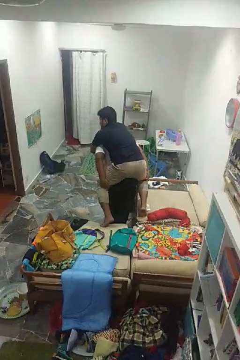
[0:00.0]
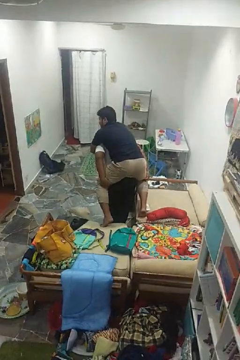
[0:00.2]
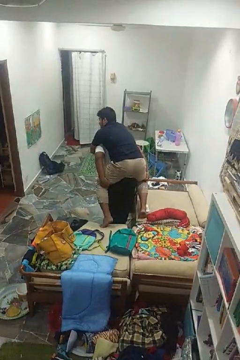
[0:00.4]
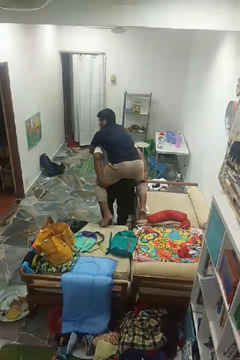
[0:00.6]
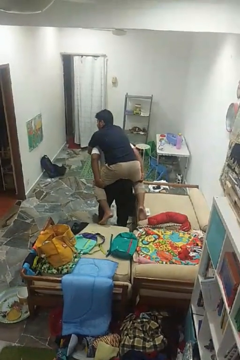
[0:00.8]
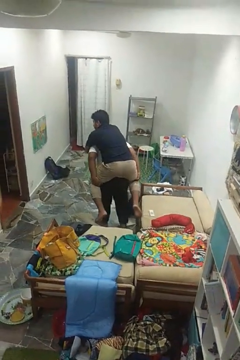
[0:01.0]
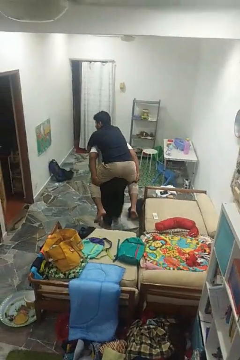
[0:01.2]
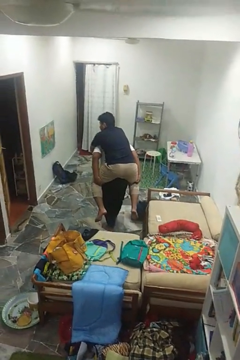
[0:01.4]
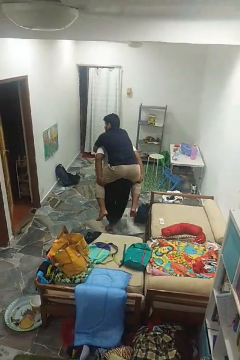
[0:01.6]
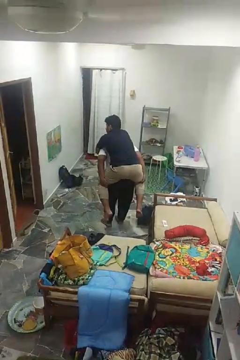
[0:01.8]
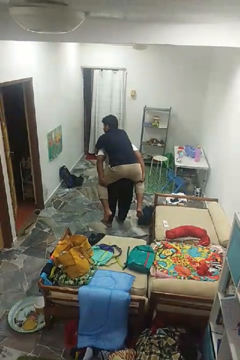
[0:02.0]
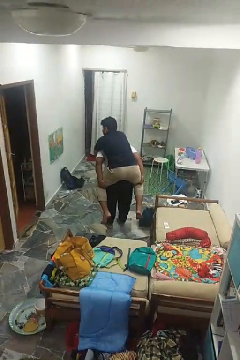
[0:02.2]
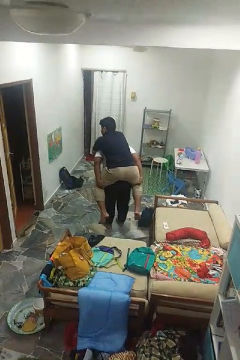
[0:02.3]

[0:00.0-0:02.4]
person carries person on back

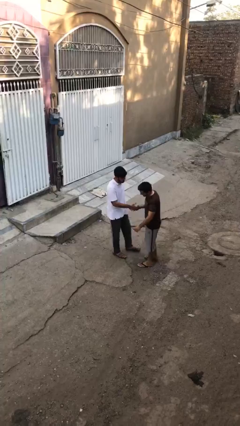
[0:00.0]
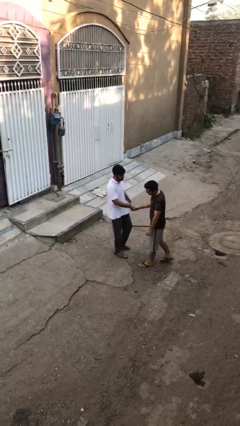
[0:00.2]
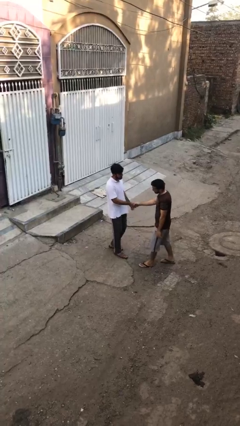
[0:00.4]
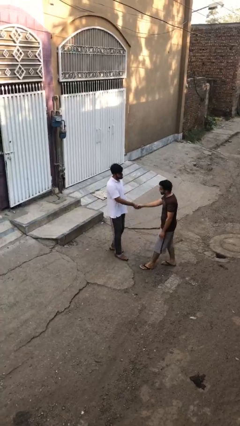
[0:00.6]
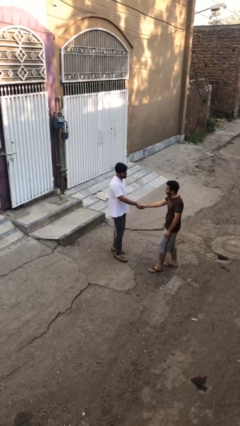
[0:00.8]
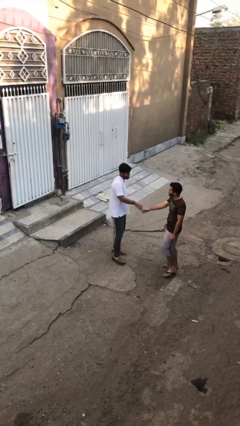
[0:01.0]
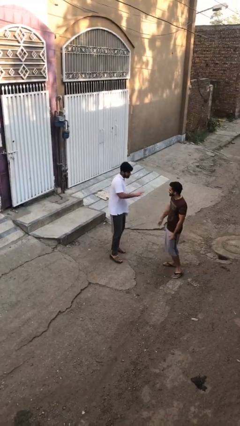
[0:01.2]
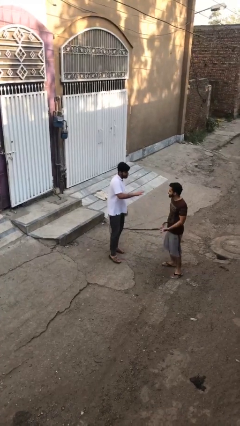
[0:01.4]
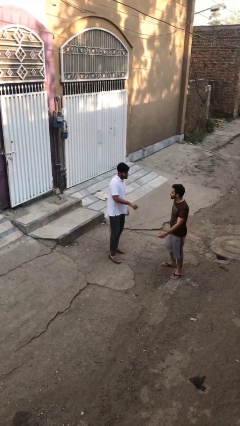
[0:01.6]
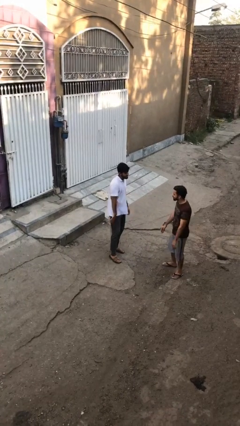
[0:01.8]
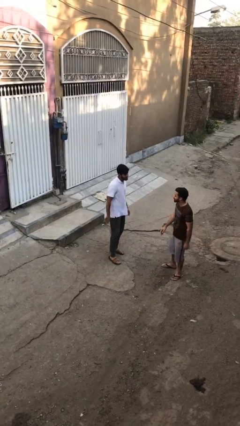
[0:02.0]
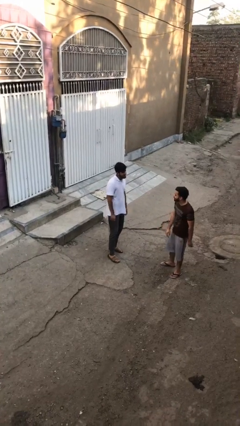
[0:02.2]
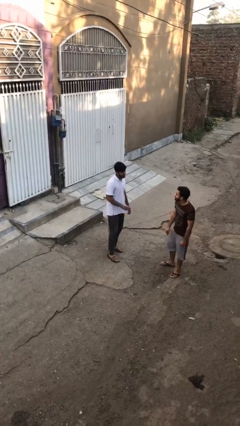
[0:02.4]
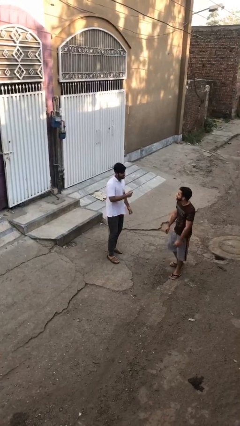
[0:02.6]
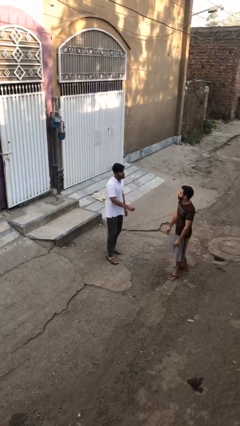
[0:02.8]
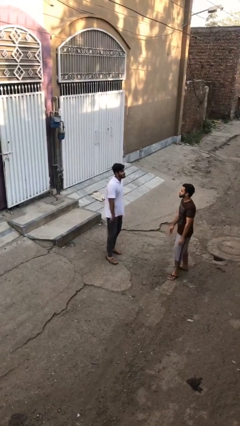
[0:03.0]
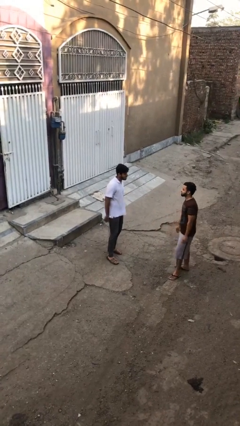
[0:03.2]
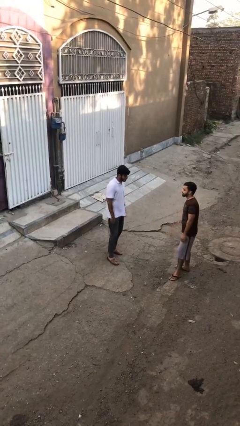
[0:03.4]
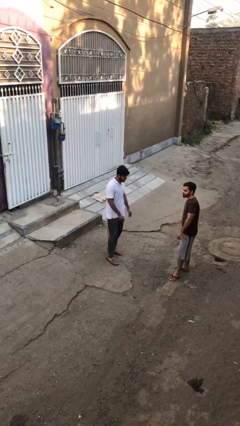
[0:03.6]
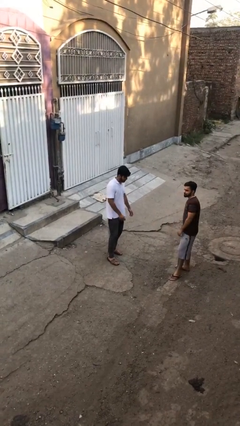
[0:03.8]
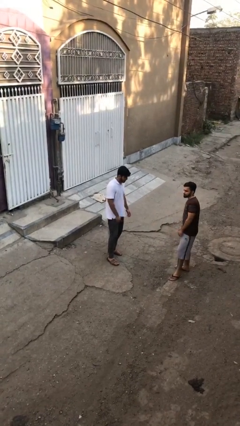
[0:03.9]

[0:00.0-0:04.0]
person talks to person

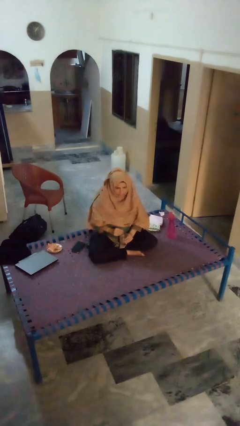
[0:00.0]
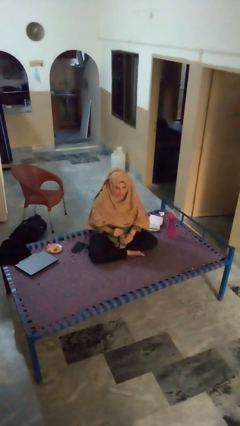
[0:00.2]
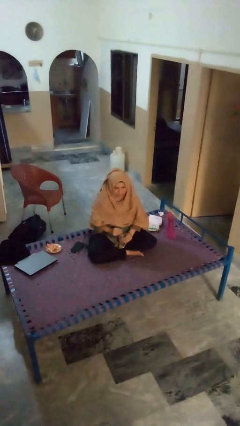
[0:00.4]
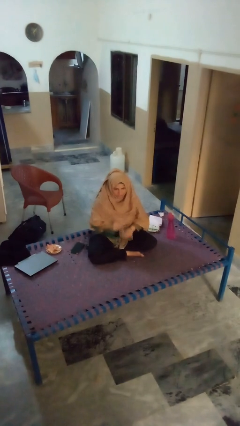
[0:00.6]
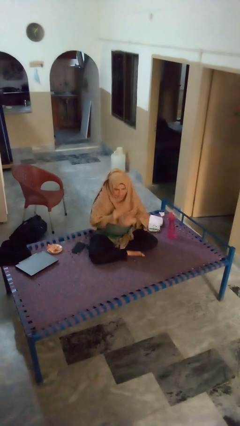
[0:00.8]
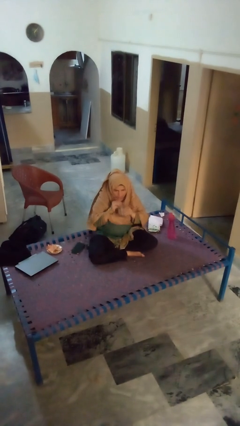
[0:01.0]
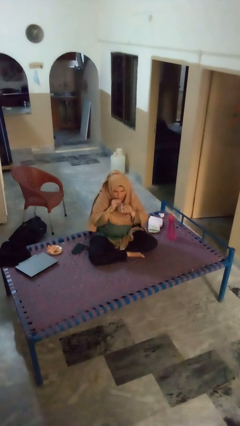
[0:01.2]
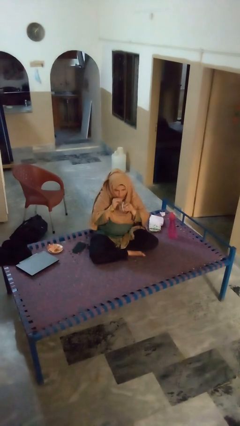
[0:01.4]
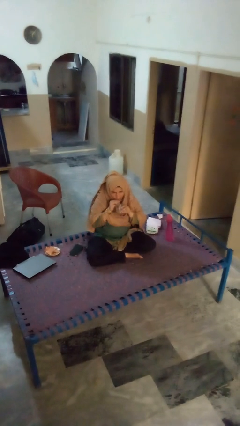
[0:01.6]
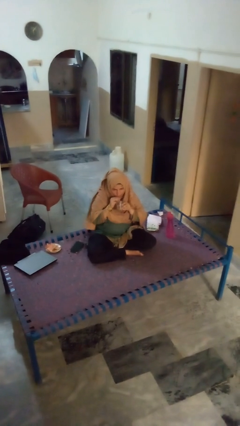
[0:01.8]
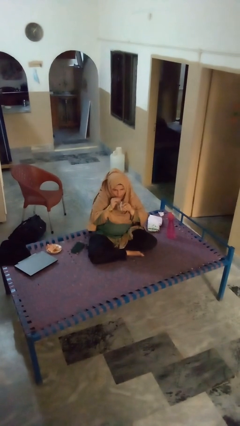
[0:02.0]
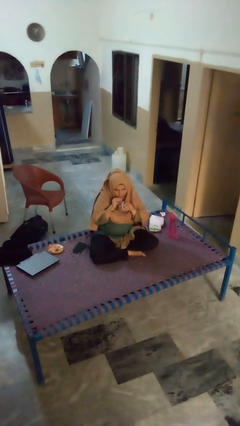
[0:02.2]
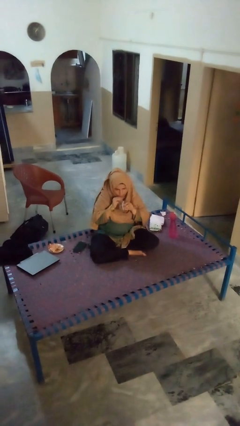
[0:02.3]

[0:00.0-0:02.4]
person drinks from straw

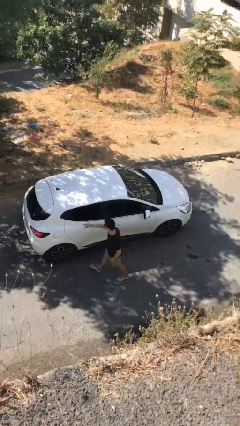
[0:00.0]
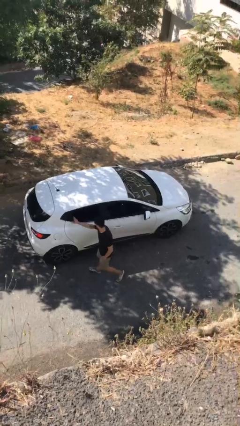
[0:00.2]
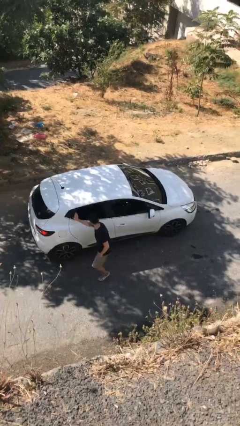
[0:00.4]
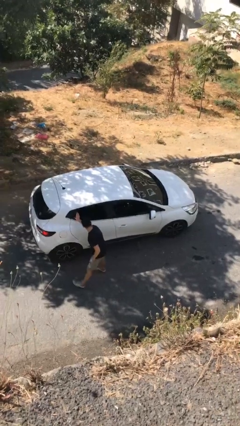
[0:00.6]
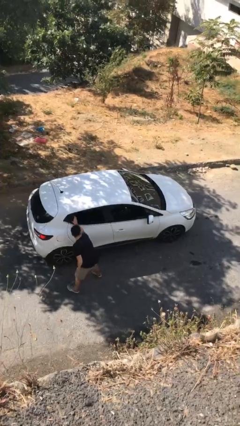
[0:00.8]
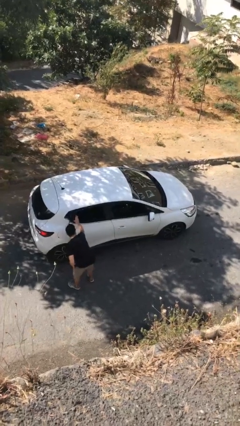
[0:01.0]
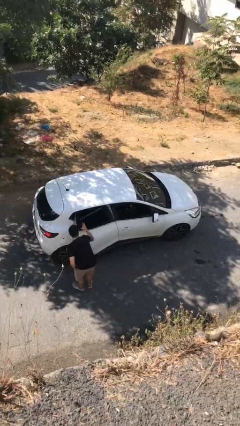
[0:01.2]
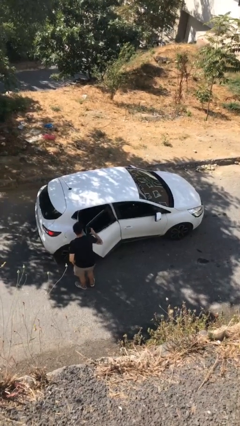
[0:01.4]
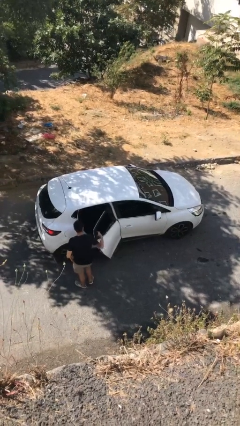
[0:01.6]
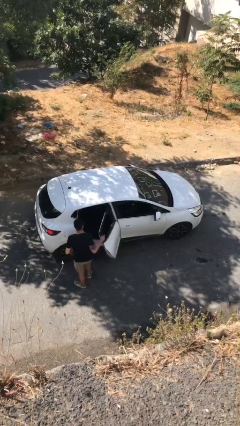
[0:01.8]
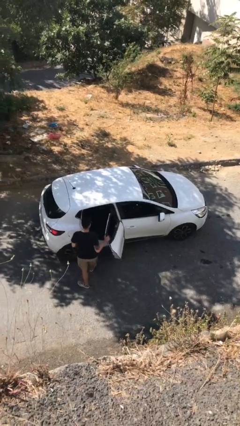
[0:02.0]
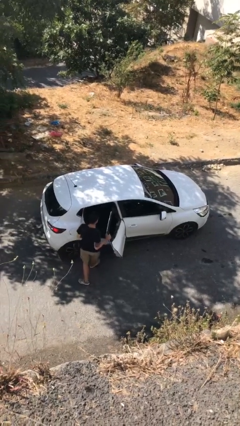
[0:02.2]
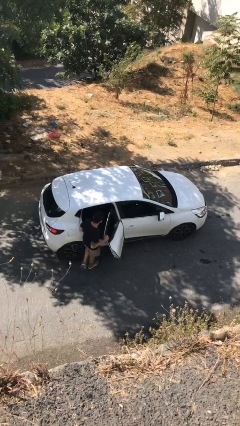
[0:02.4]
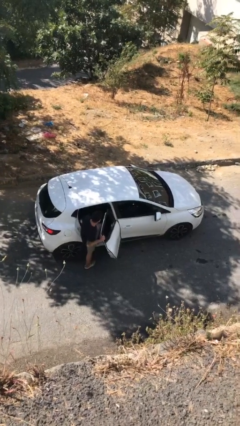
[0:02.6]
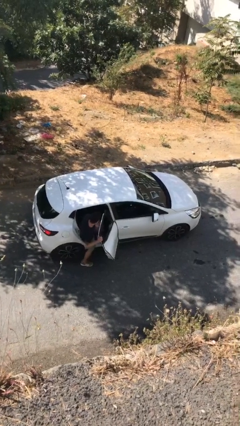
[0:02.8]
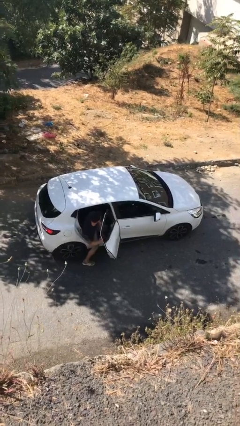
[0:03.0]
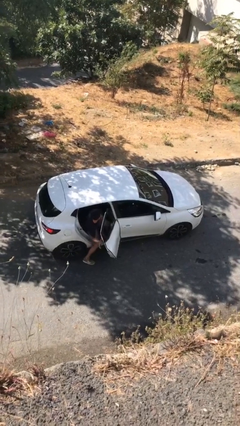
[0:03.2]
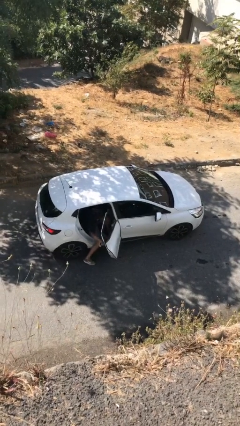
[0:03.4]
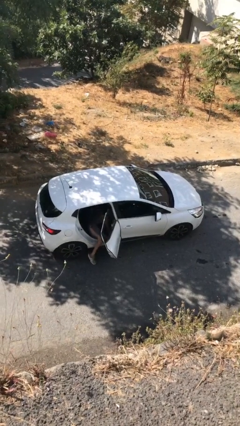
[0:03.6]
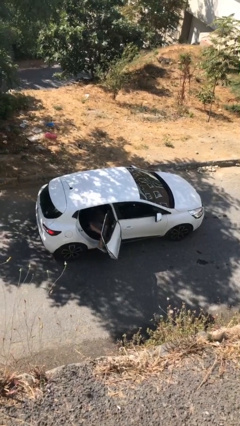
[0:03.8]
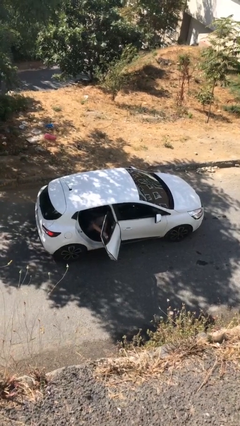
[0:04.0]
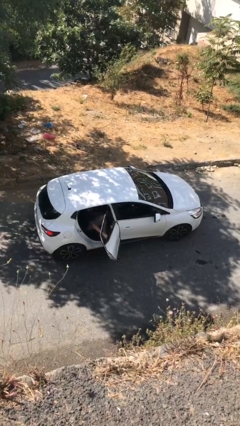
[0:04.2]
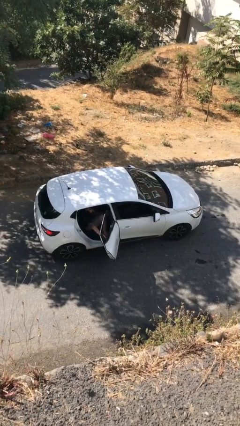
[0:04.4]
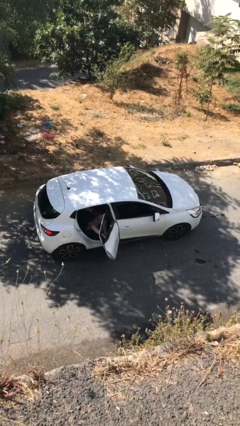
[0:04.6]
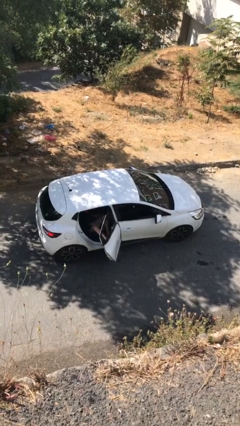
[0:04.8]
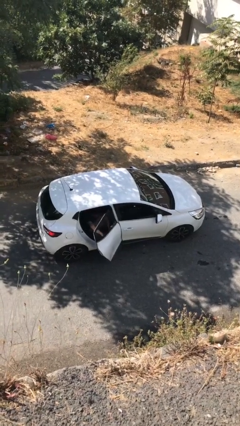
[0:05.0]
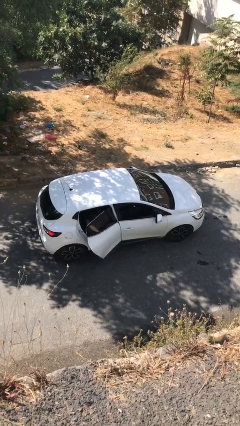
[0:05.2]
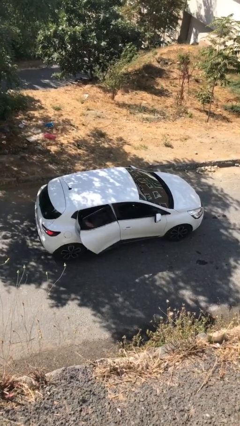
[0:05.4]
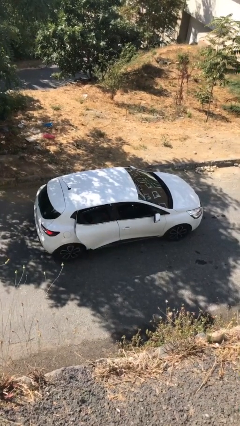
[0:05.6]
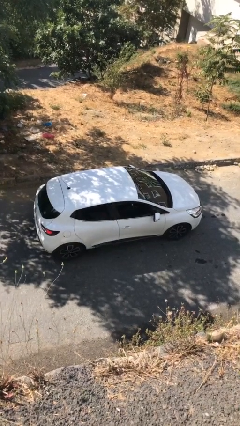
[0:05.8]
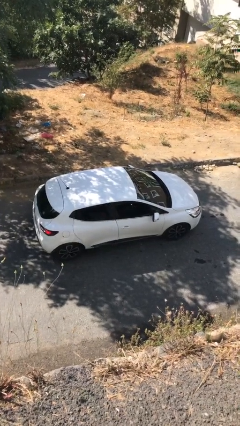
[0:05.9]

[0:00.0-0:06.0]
car picks up person

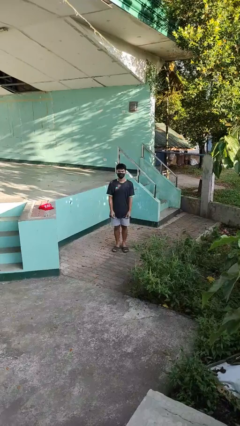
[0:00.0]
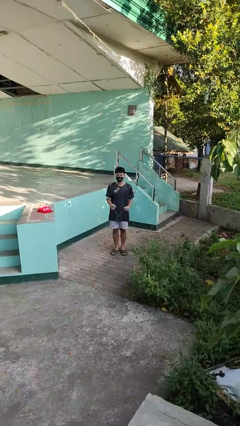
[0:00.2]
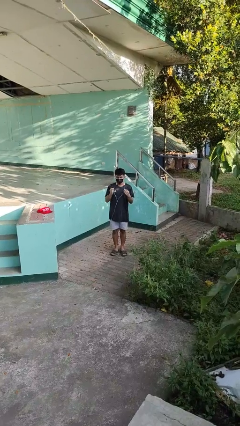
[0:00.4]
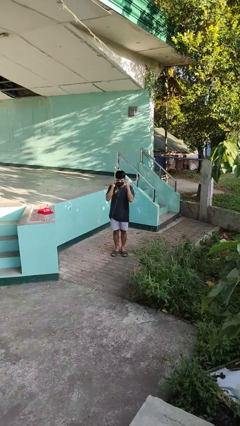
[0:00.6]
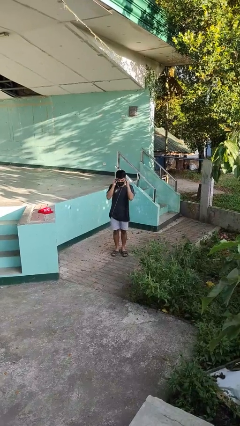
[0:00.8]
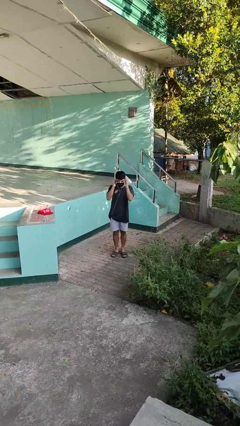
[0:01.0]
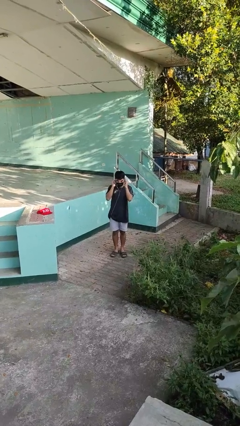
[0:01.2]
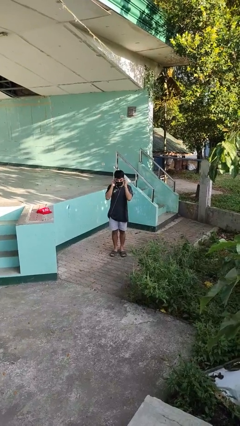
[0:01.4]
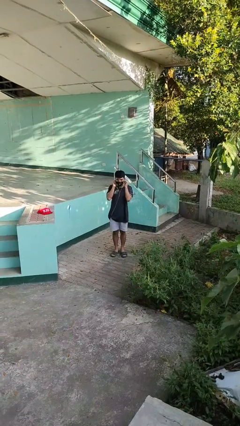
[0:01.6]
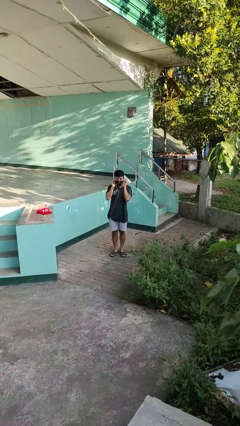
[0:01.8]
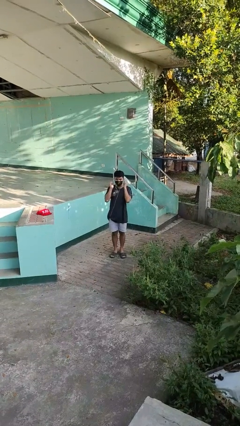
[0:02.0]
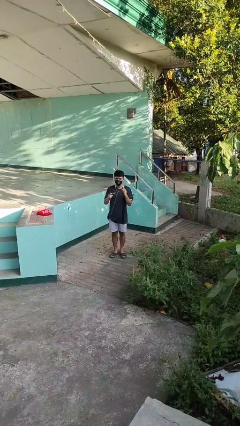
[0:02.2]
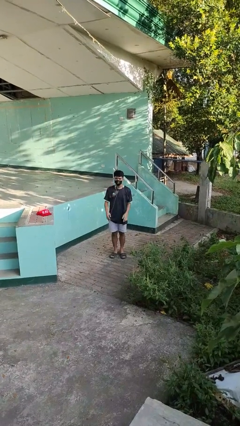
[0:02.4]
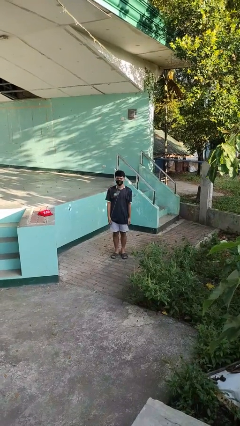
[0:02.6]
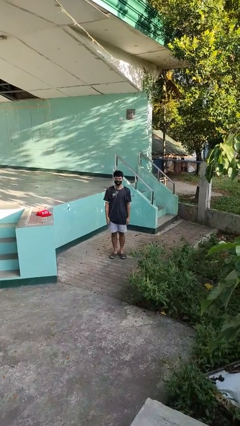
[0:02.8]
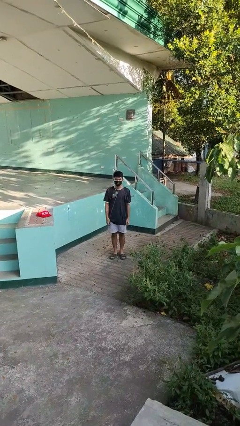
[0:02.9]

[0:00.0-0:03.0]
person puts on headphones

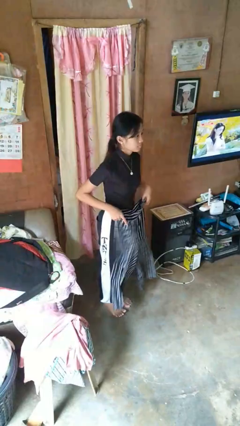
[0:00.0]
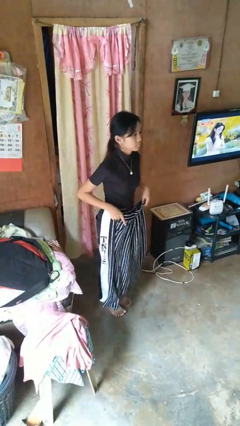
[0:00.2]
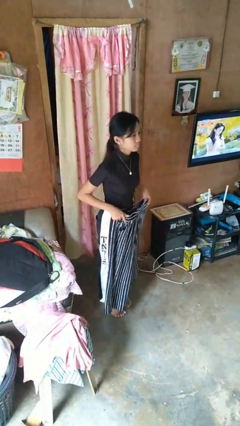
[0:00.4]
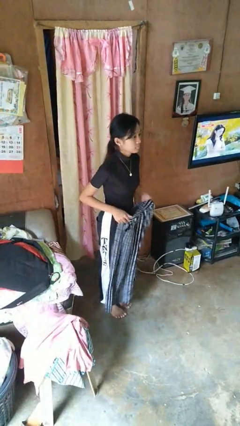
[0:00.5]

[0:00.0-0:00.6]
person takes off pants
